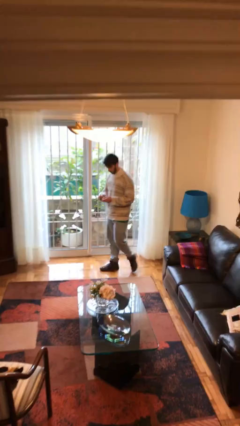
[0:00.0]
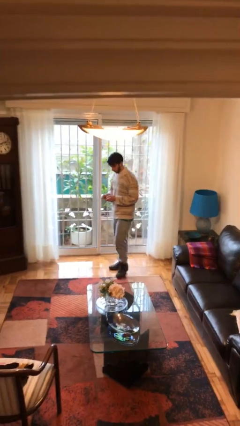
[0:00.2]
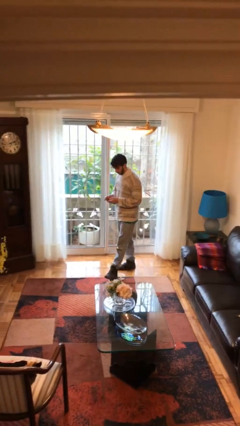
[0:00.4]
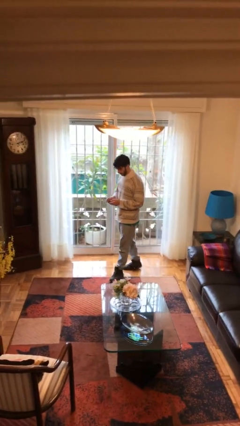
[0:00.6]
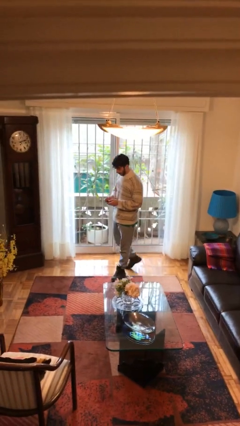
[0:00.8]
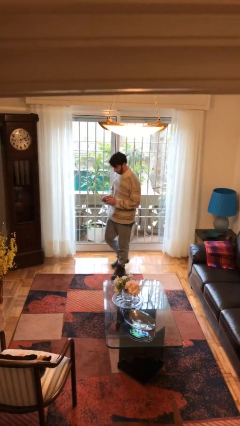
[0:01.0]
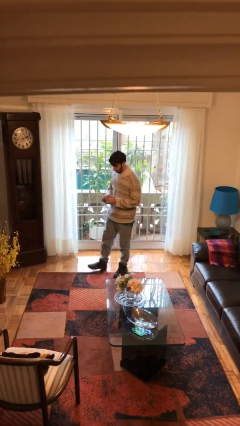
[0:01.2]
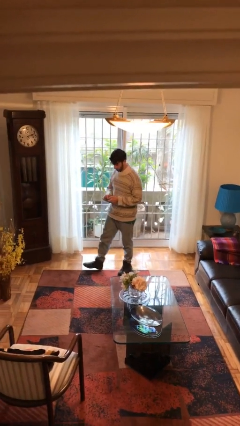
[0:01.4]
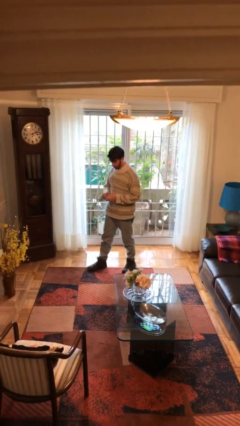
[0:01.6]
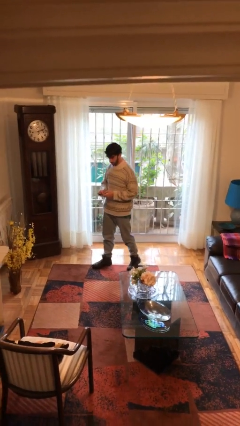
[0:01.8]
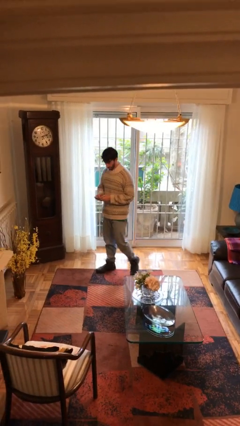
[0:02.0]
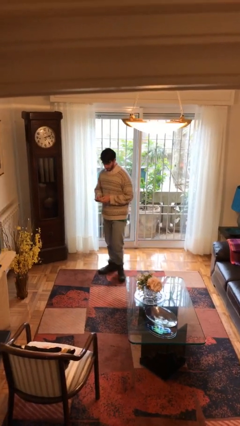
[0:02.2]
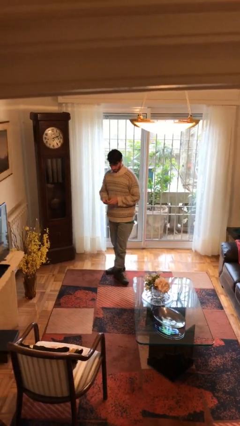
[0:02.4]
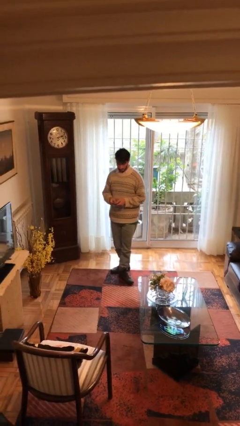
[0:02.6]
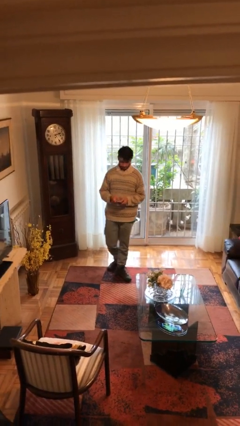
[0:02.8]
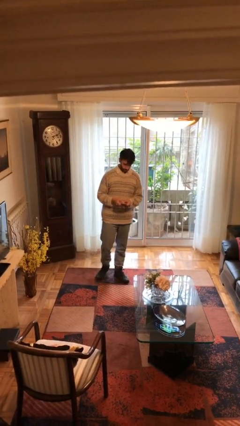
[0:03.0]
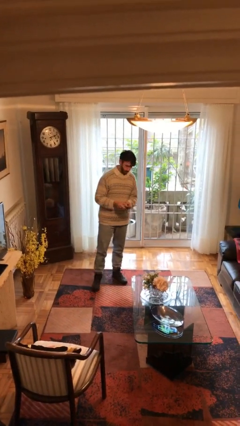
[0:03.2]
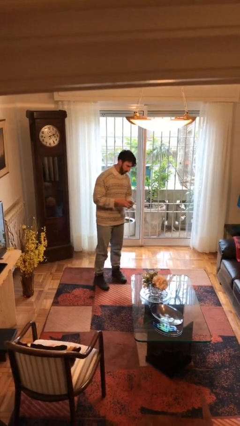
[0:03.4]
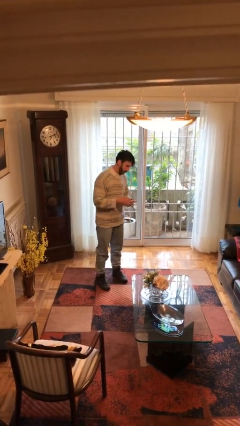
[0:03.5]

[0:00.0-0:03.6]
person texts on phone

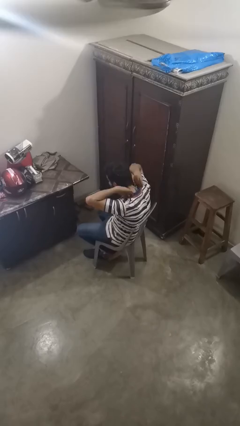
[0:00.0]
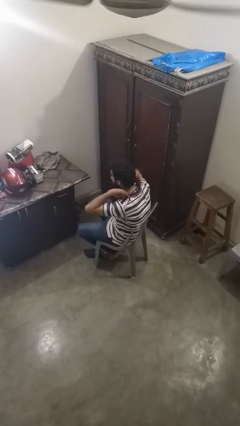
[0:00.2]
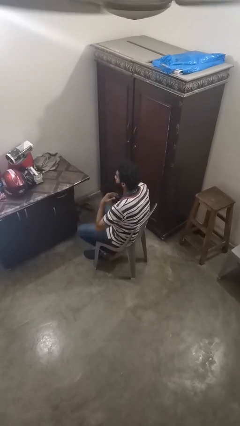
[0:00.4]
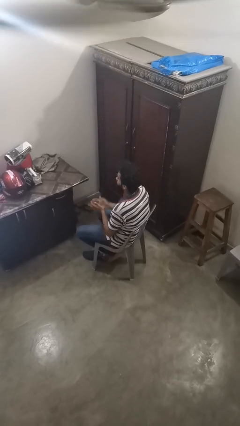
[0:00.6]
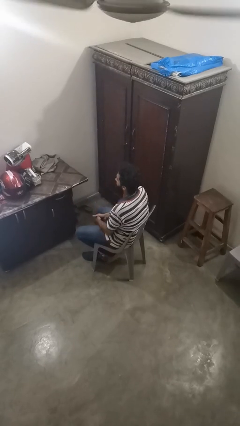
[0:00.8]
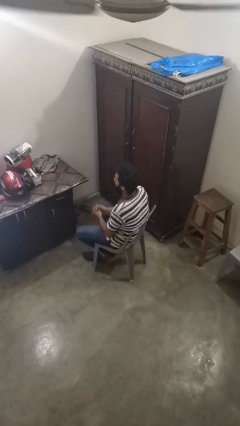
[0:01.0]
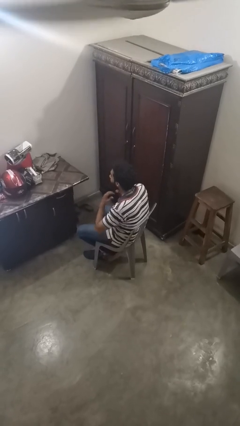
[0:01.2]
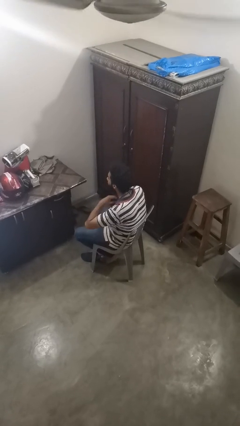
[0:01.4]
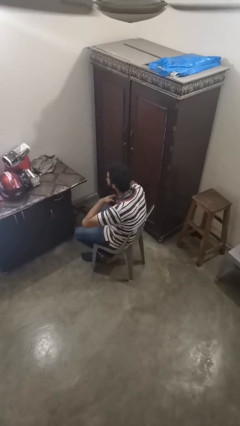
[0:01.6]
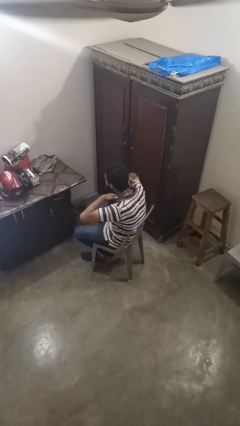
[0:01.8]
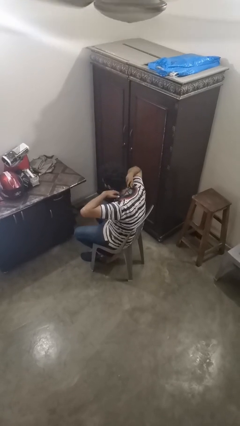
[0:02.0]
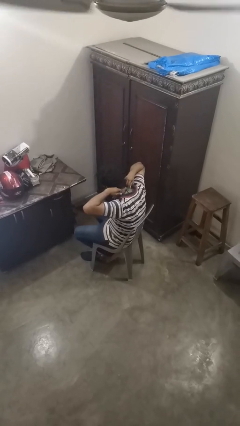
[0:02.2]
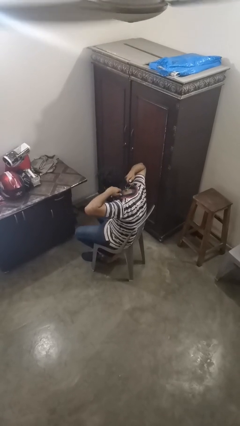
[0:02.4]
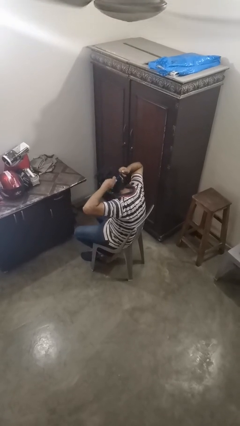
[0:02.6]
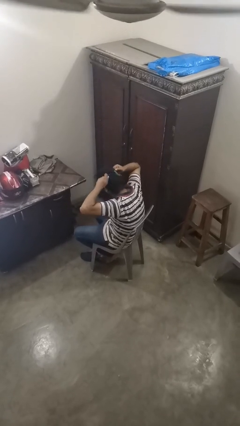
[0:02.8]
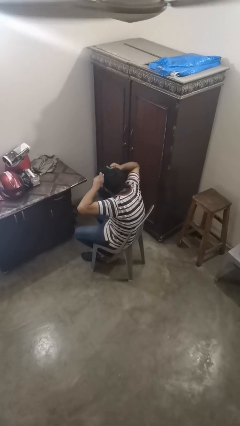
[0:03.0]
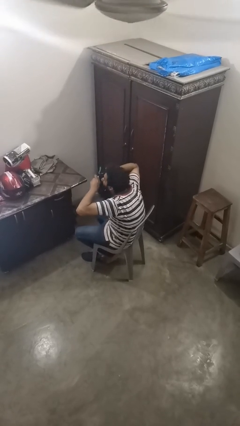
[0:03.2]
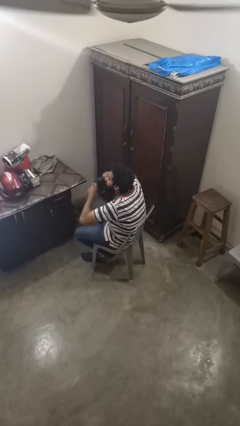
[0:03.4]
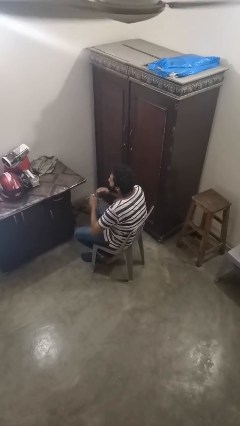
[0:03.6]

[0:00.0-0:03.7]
person takes off necklace

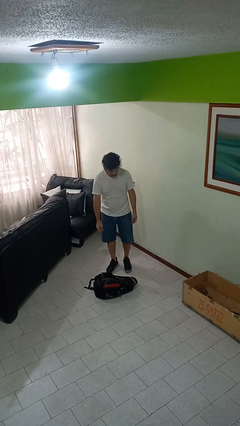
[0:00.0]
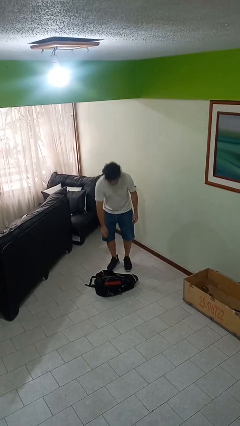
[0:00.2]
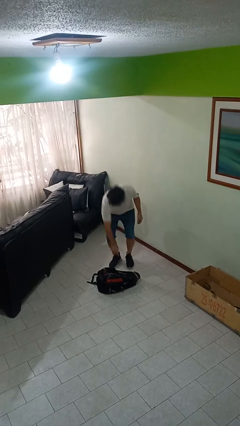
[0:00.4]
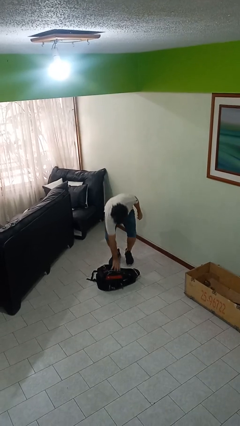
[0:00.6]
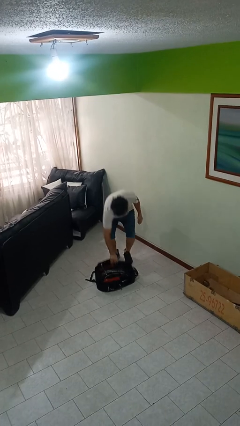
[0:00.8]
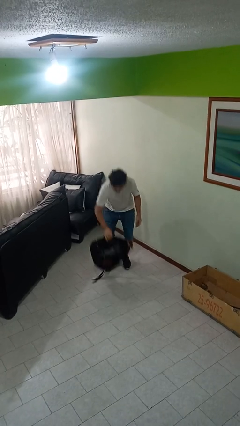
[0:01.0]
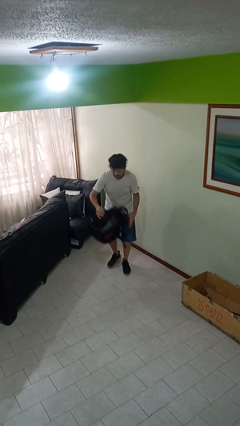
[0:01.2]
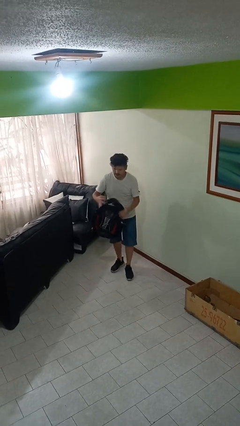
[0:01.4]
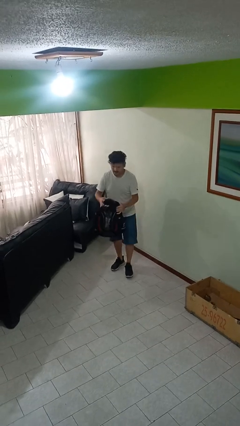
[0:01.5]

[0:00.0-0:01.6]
person picks up object from floor

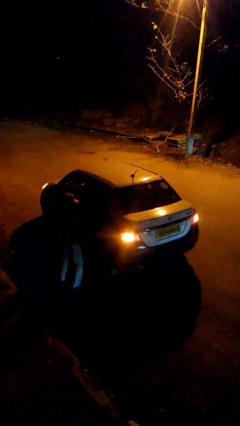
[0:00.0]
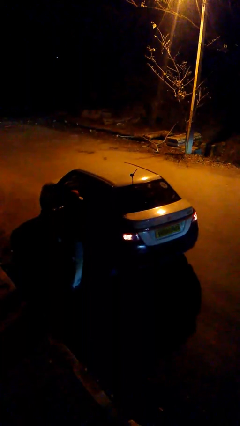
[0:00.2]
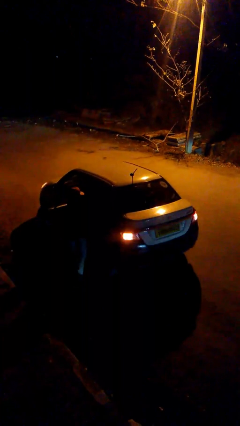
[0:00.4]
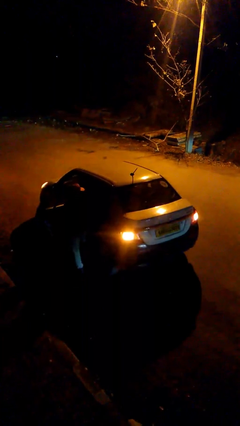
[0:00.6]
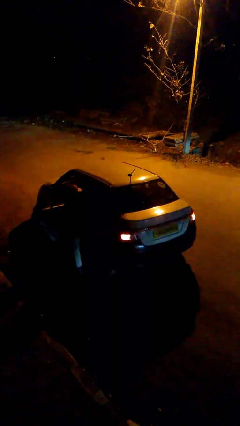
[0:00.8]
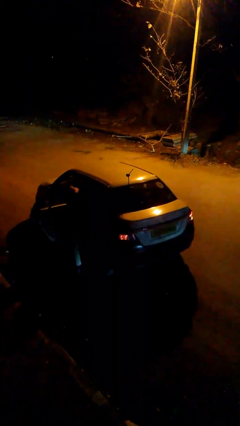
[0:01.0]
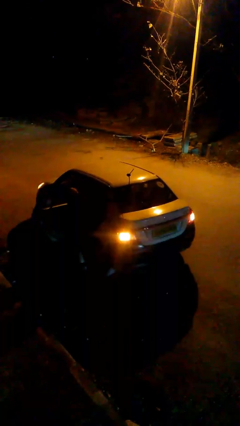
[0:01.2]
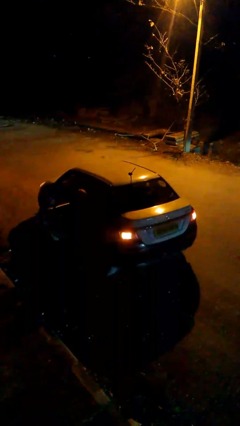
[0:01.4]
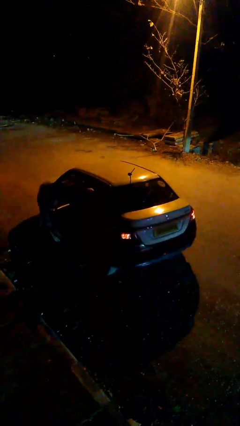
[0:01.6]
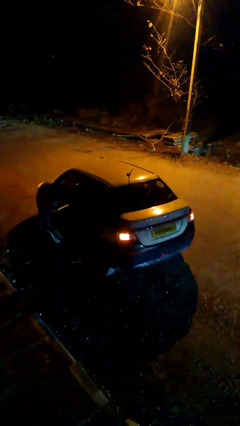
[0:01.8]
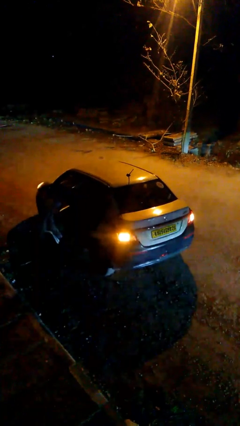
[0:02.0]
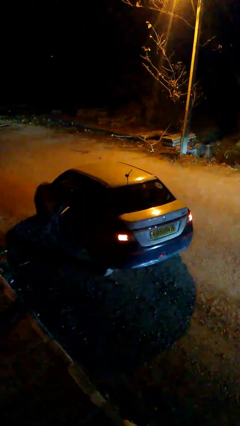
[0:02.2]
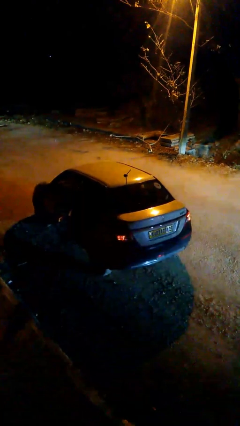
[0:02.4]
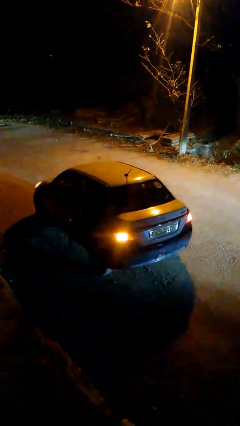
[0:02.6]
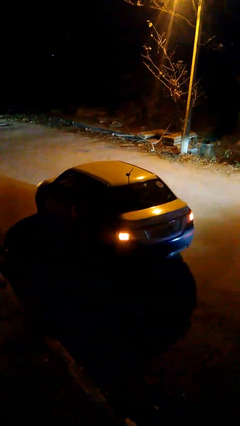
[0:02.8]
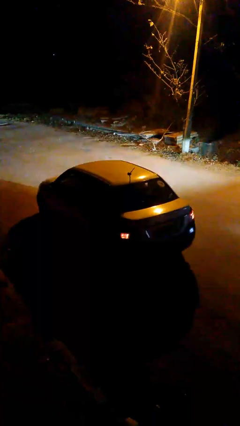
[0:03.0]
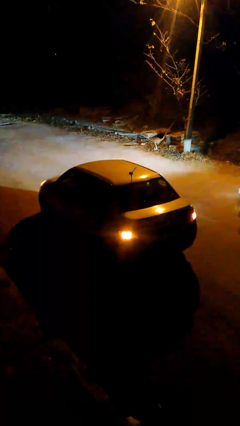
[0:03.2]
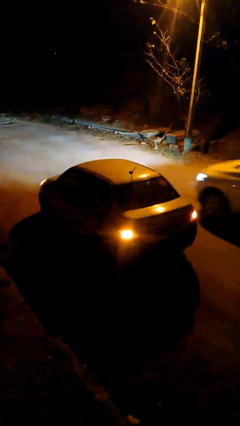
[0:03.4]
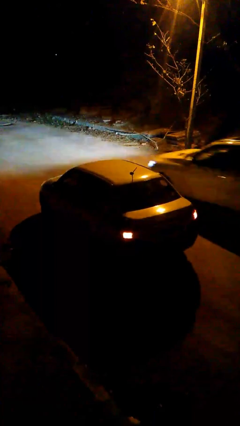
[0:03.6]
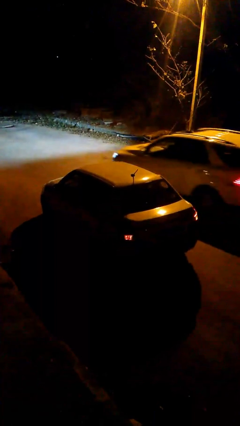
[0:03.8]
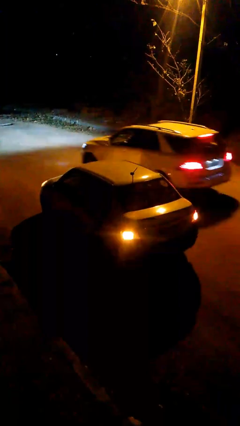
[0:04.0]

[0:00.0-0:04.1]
car picks up person

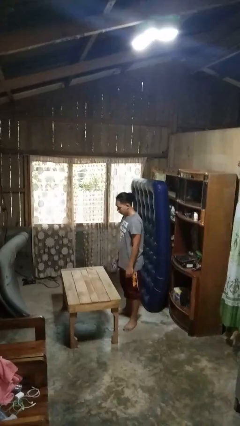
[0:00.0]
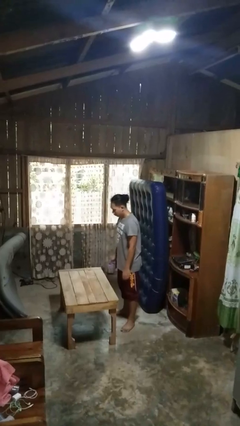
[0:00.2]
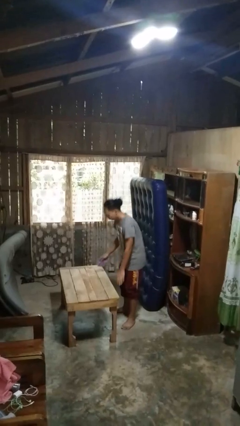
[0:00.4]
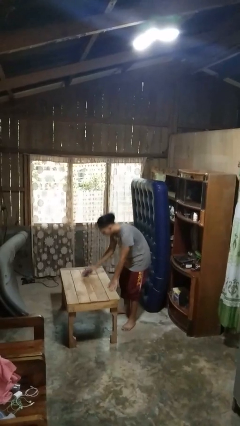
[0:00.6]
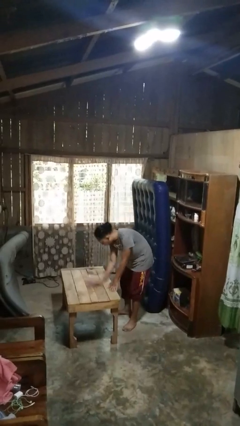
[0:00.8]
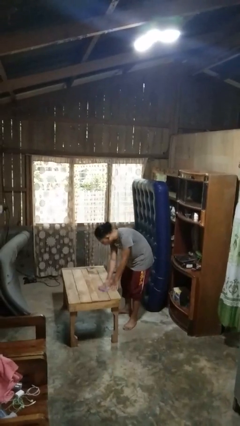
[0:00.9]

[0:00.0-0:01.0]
person cleans table with rag

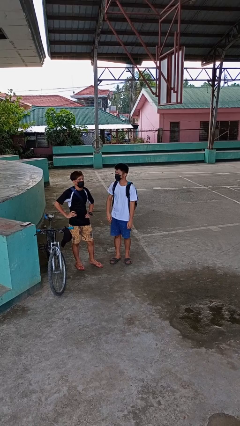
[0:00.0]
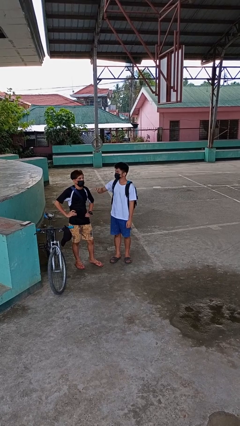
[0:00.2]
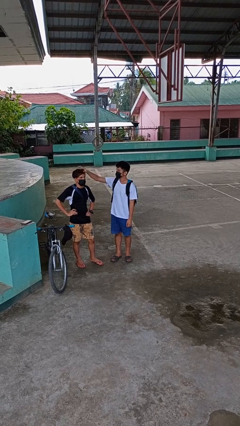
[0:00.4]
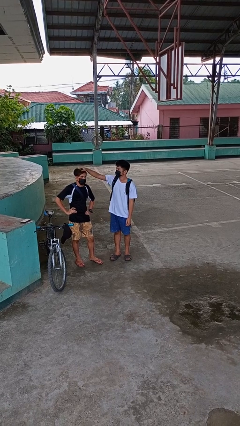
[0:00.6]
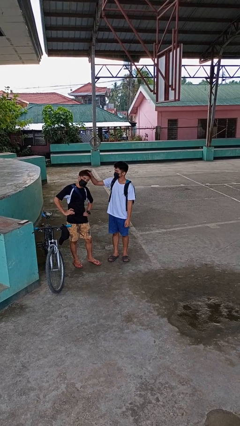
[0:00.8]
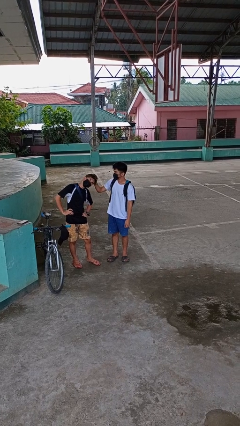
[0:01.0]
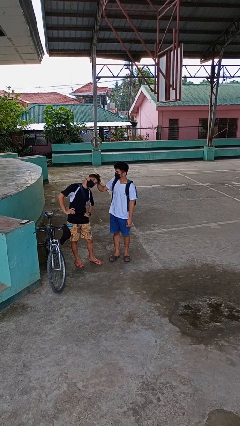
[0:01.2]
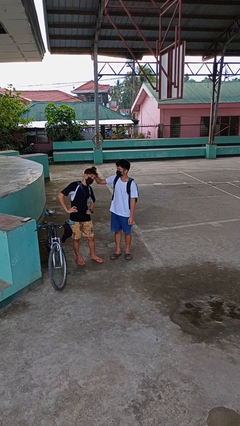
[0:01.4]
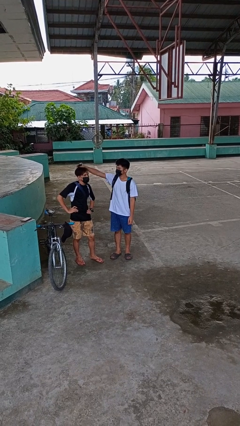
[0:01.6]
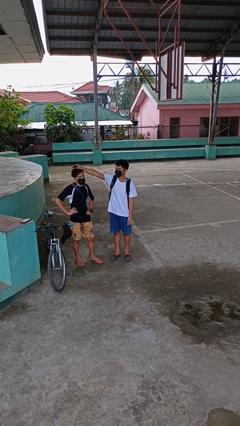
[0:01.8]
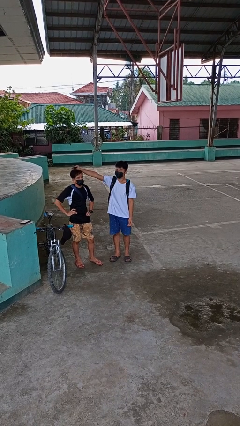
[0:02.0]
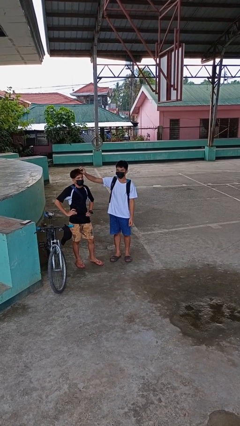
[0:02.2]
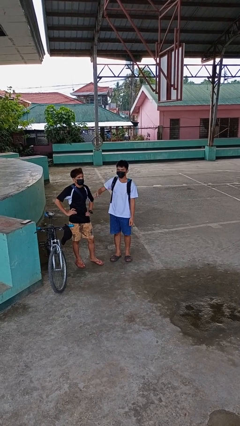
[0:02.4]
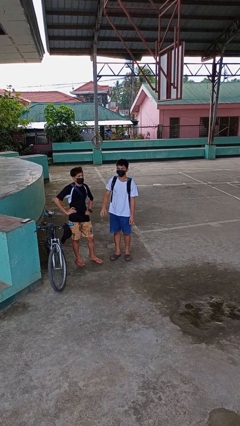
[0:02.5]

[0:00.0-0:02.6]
person grabs person by hair

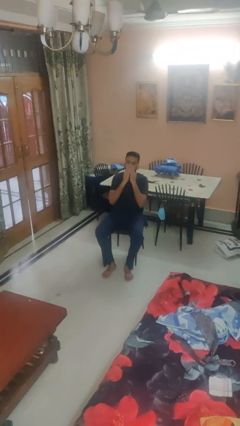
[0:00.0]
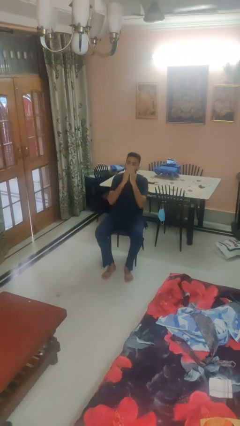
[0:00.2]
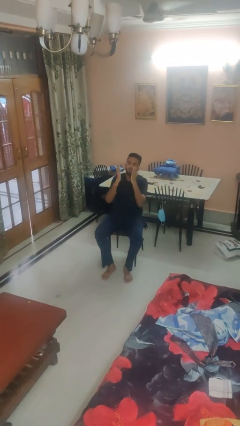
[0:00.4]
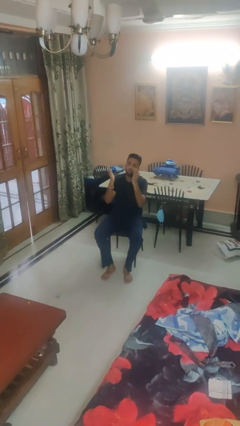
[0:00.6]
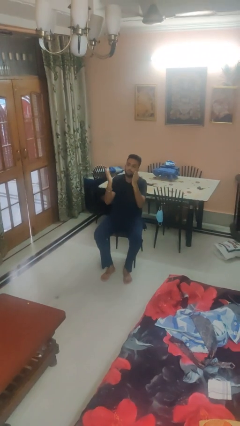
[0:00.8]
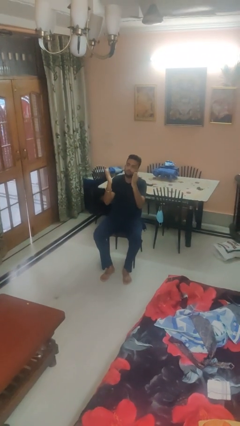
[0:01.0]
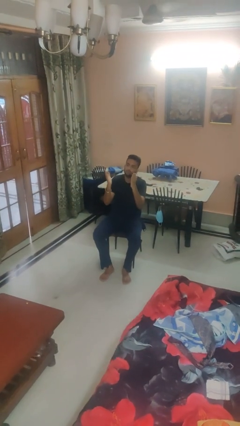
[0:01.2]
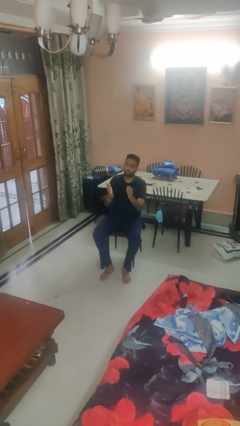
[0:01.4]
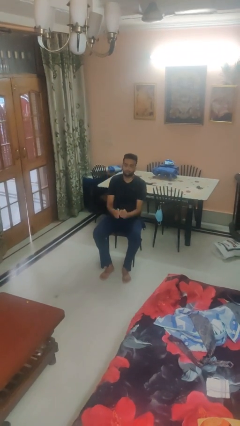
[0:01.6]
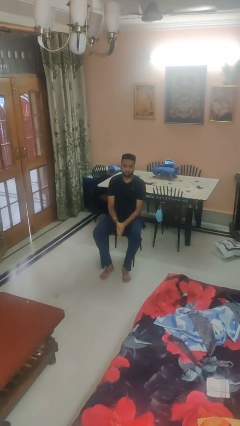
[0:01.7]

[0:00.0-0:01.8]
person gestures blow kiss
